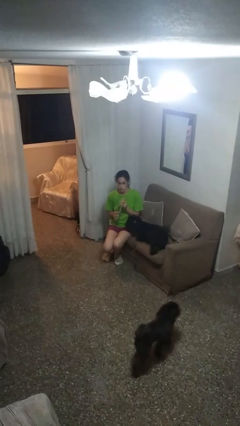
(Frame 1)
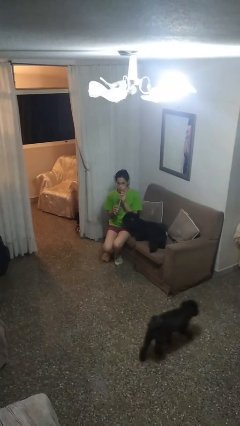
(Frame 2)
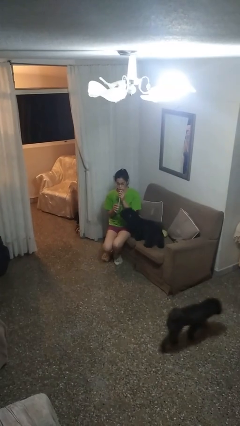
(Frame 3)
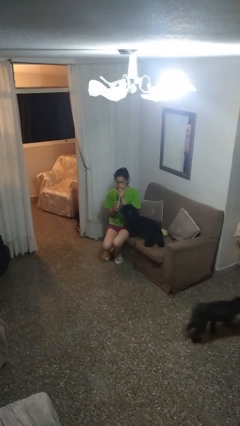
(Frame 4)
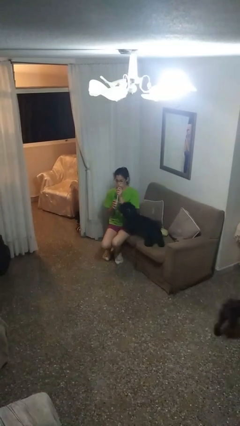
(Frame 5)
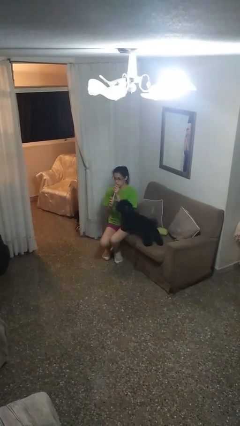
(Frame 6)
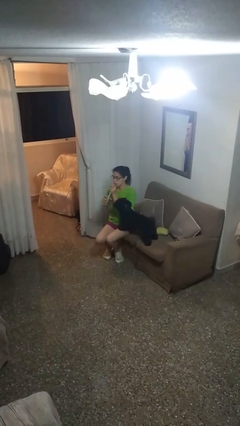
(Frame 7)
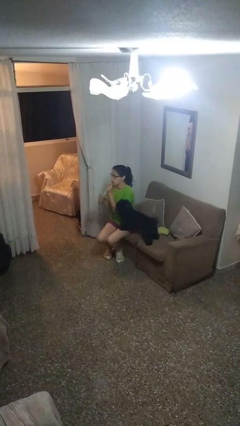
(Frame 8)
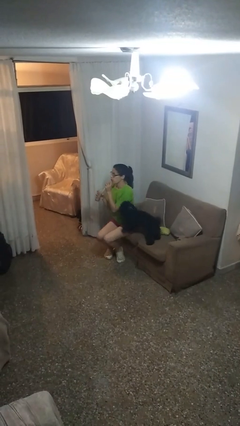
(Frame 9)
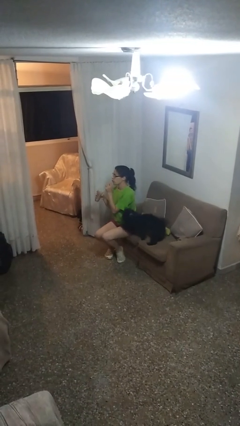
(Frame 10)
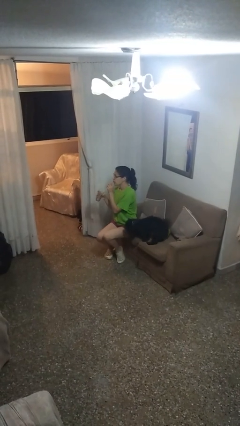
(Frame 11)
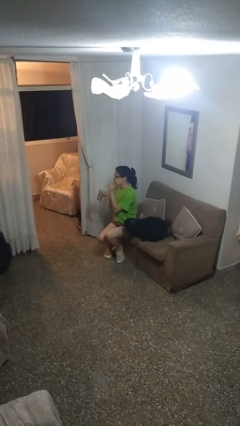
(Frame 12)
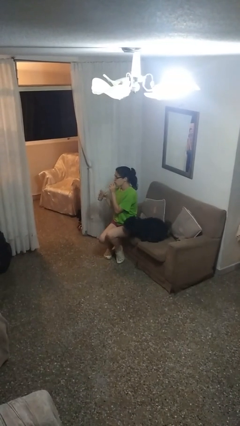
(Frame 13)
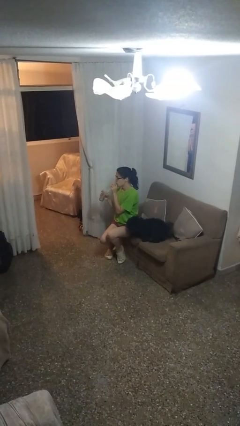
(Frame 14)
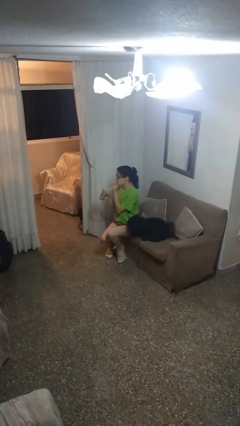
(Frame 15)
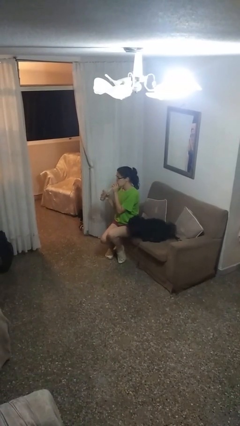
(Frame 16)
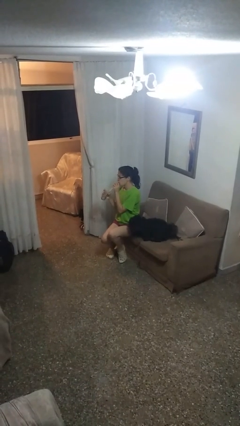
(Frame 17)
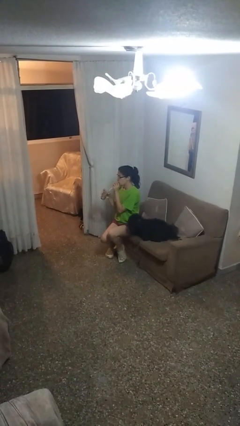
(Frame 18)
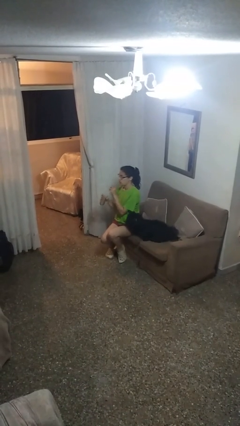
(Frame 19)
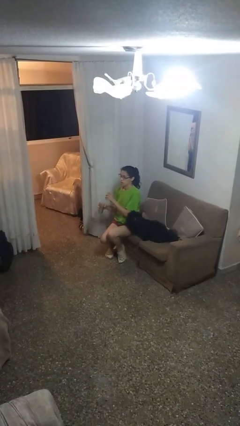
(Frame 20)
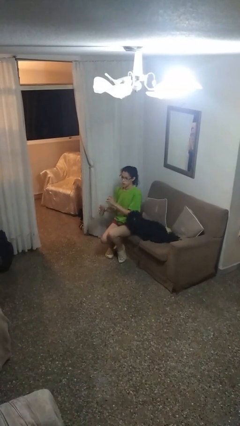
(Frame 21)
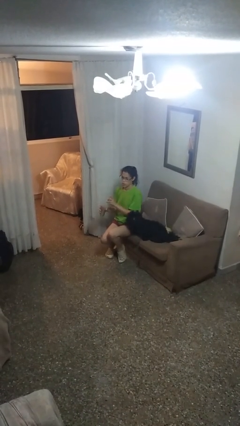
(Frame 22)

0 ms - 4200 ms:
person drinks from straw

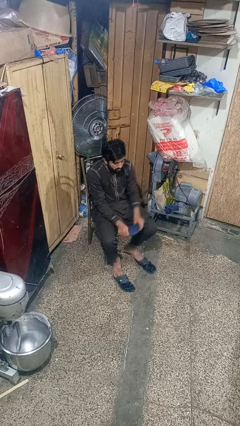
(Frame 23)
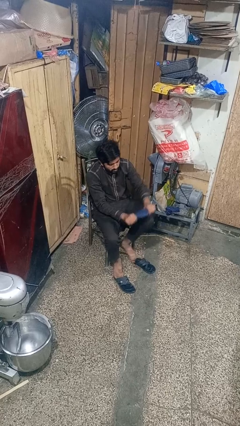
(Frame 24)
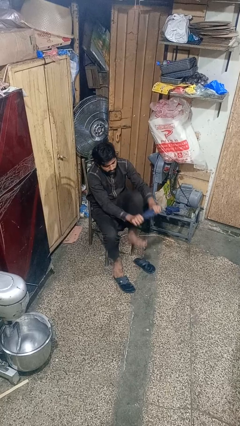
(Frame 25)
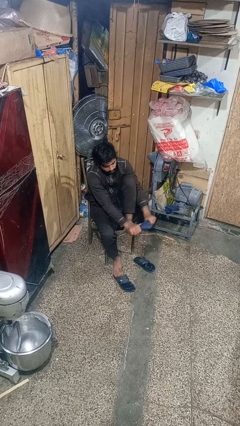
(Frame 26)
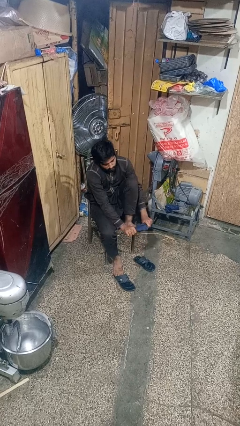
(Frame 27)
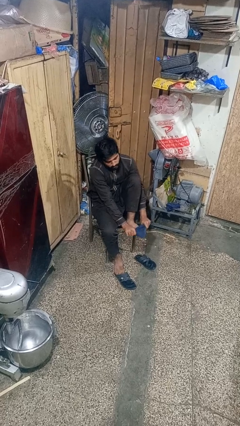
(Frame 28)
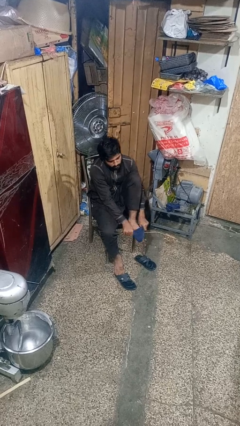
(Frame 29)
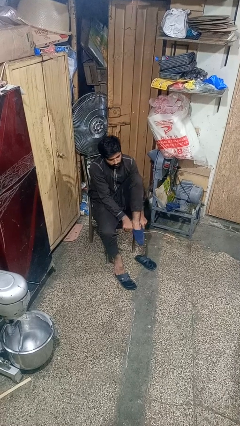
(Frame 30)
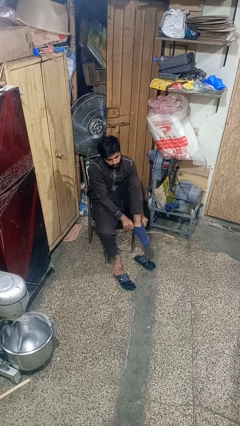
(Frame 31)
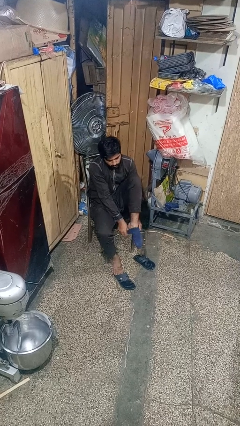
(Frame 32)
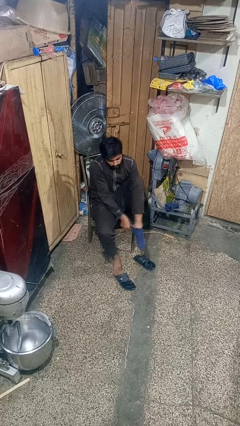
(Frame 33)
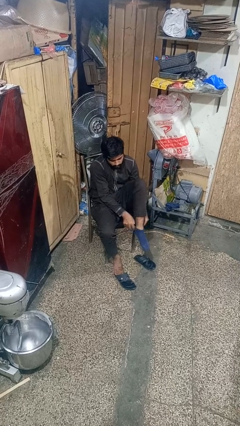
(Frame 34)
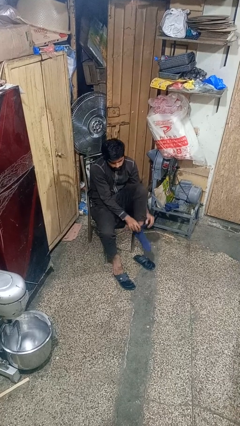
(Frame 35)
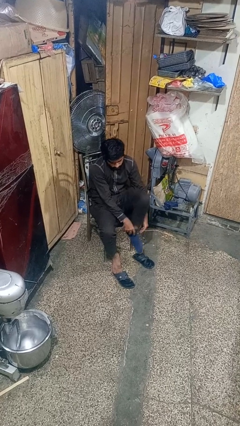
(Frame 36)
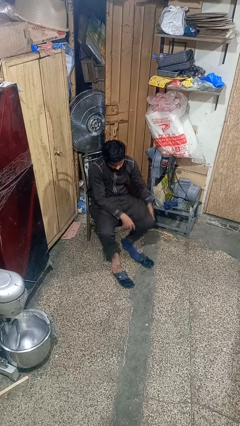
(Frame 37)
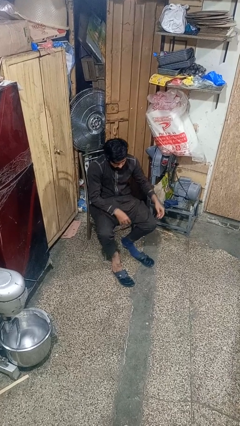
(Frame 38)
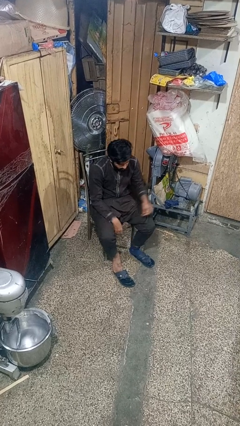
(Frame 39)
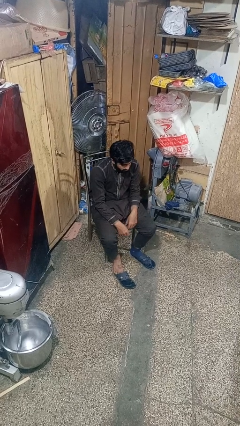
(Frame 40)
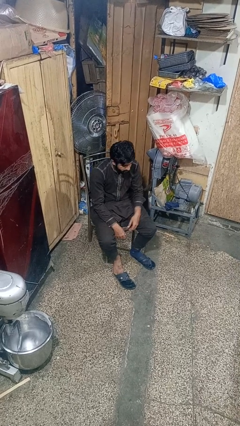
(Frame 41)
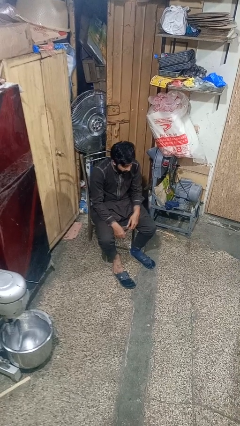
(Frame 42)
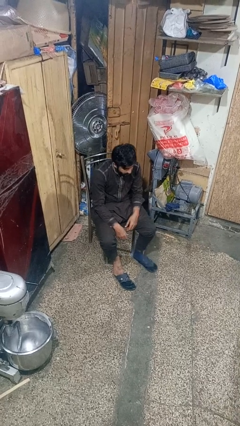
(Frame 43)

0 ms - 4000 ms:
person puts on socks

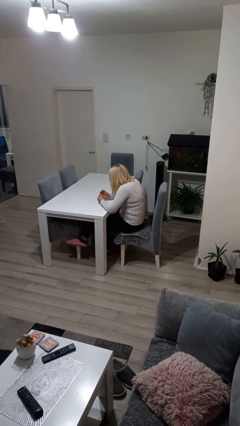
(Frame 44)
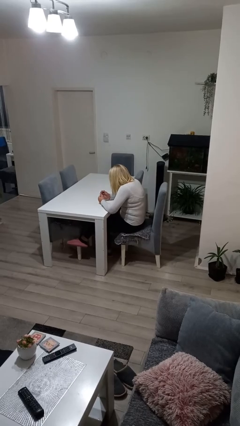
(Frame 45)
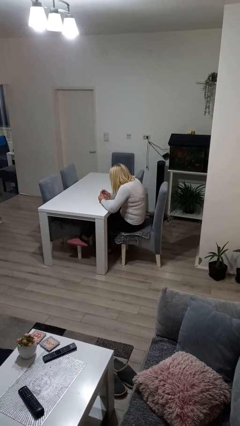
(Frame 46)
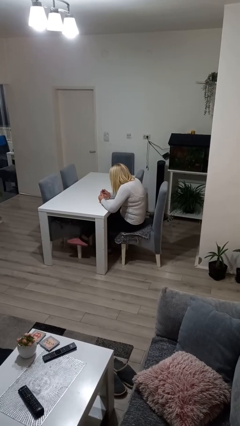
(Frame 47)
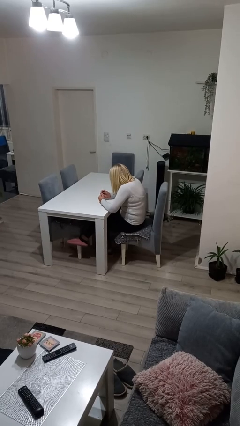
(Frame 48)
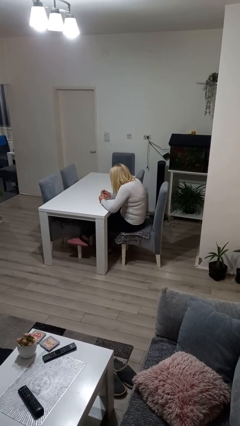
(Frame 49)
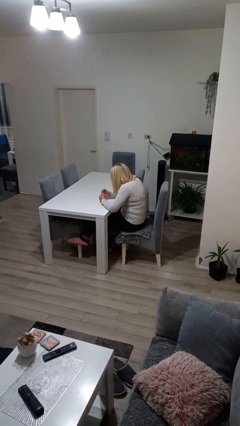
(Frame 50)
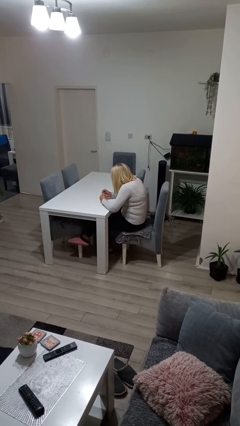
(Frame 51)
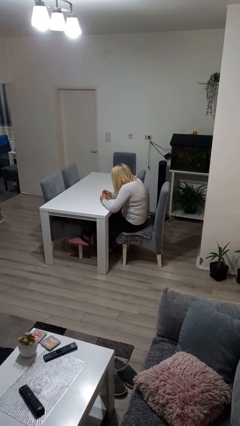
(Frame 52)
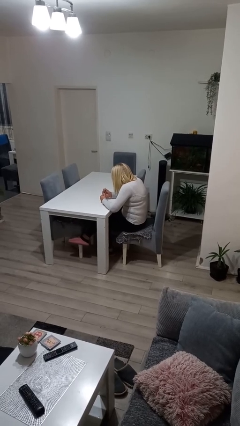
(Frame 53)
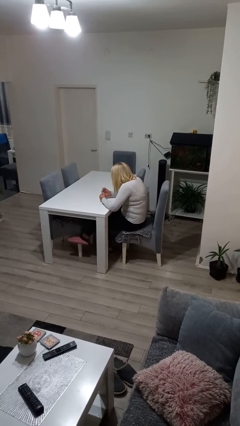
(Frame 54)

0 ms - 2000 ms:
person clips fingernails

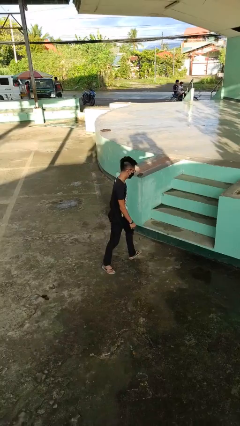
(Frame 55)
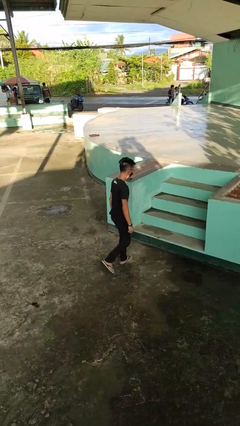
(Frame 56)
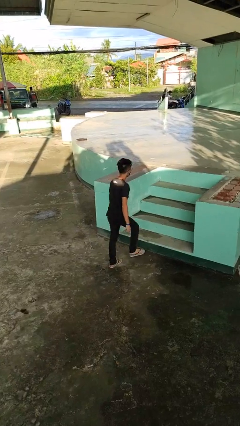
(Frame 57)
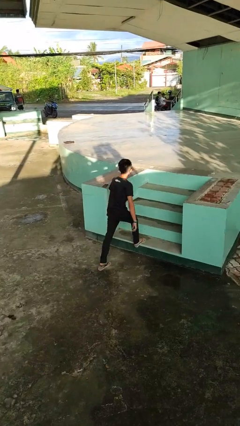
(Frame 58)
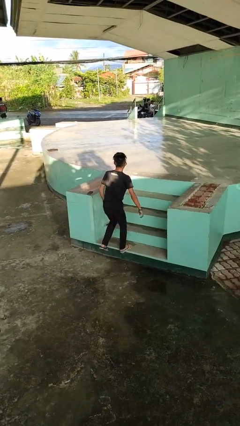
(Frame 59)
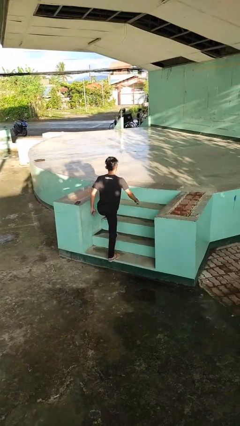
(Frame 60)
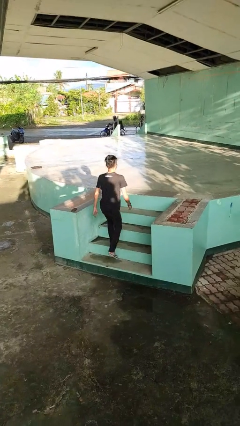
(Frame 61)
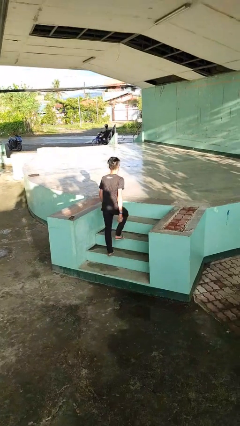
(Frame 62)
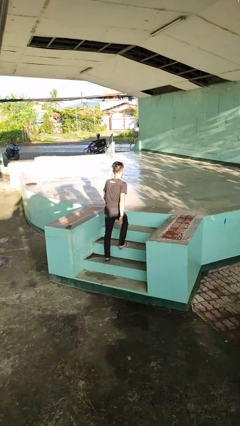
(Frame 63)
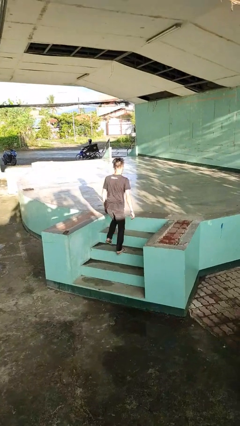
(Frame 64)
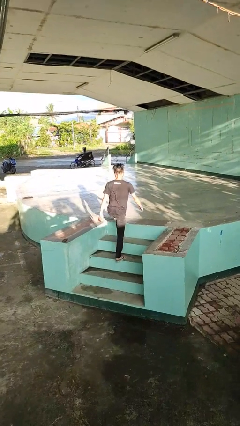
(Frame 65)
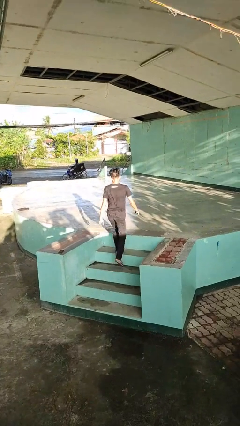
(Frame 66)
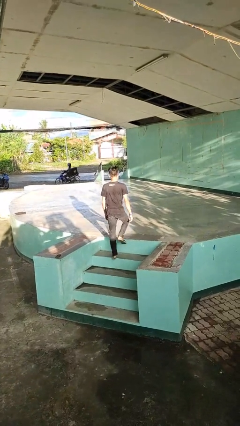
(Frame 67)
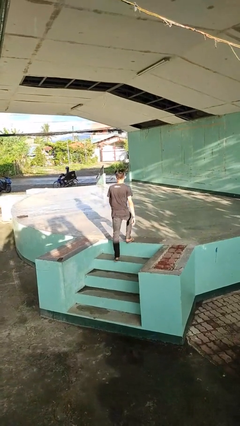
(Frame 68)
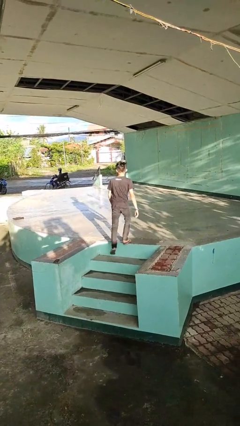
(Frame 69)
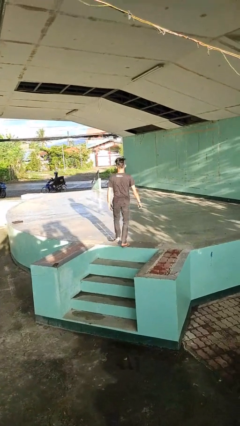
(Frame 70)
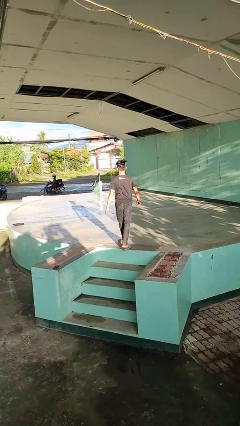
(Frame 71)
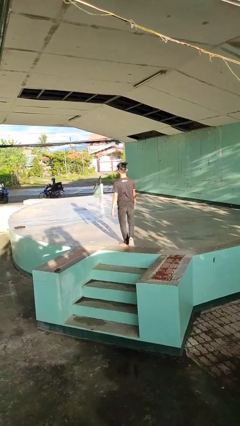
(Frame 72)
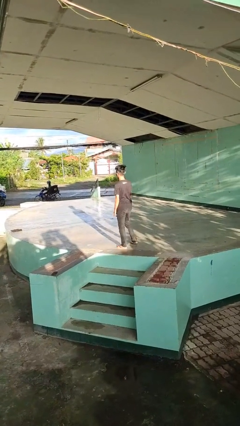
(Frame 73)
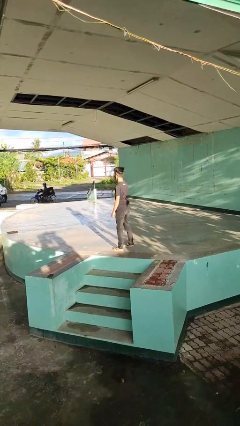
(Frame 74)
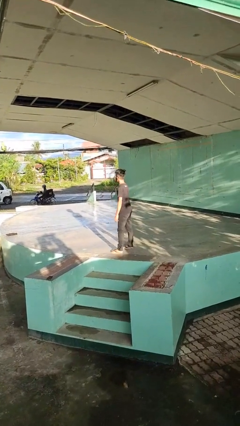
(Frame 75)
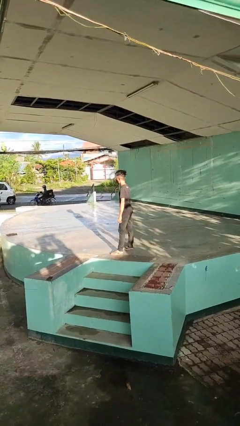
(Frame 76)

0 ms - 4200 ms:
person climbs up stairs

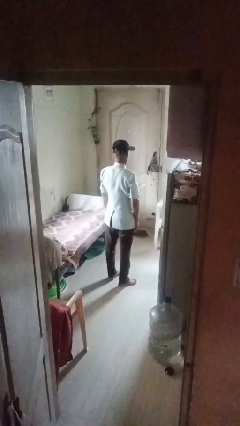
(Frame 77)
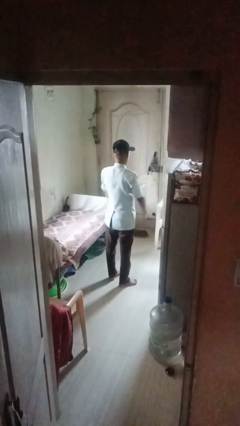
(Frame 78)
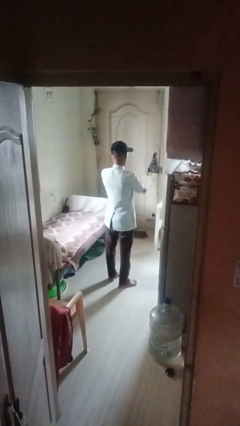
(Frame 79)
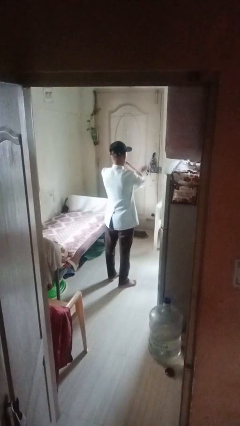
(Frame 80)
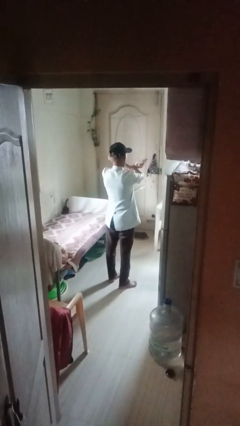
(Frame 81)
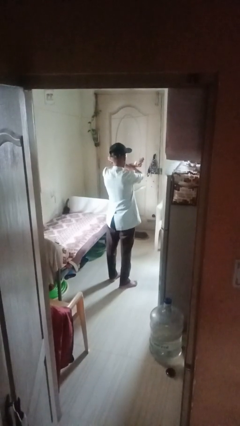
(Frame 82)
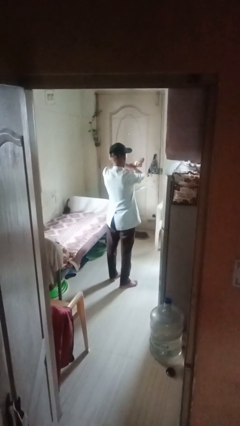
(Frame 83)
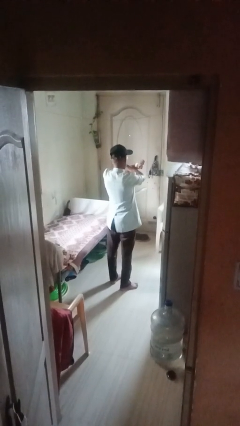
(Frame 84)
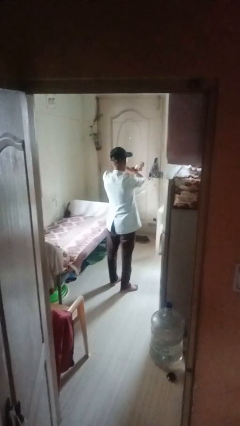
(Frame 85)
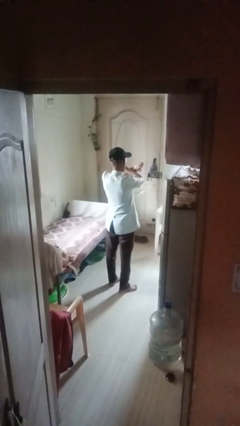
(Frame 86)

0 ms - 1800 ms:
person gestures arms x

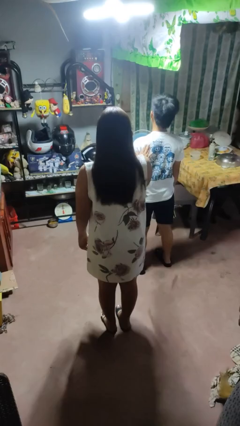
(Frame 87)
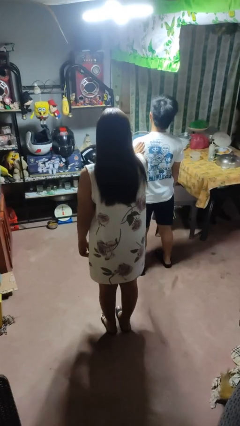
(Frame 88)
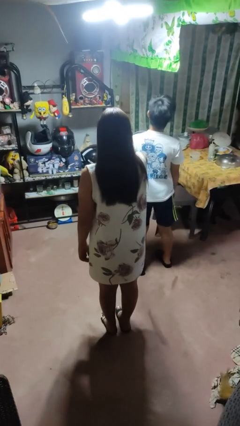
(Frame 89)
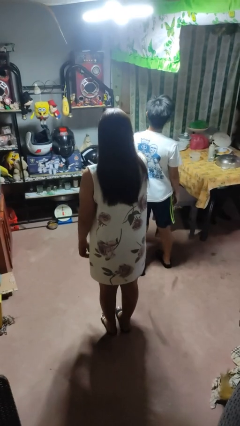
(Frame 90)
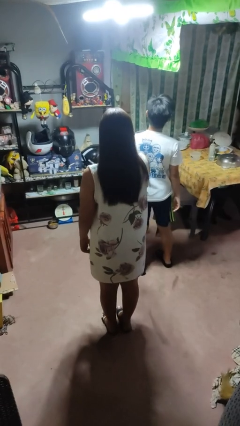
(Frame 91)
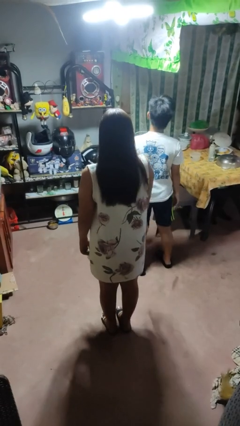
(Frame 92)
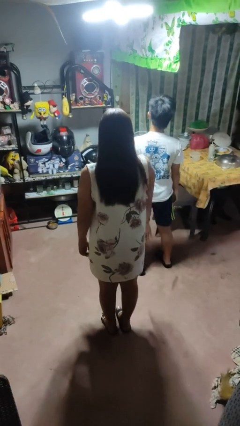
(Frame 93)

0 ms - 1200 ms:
person shoves person

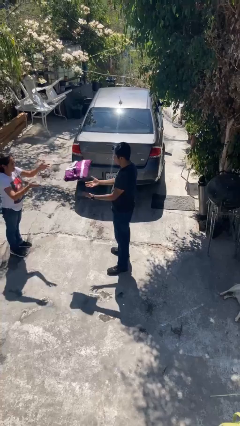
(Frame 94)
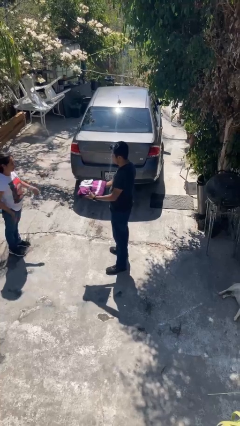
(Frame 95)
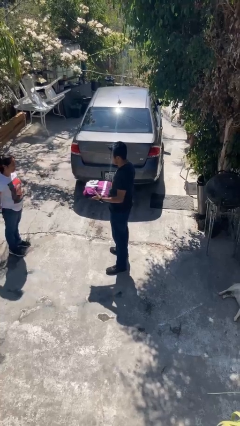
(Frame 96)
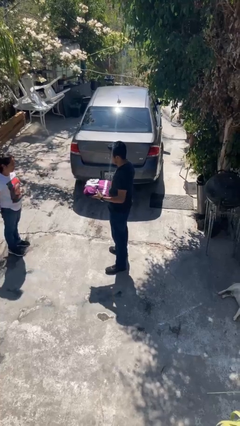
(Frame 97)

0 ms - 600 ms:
person catches object from person
